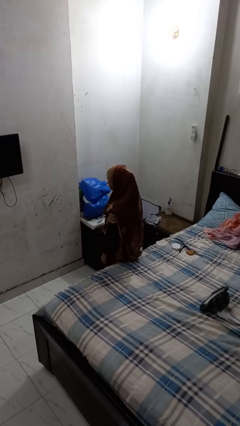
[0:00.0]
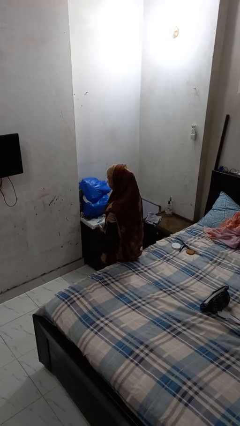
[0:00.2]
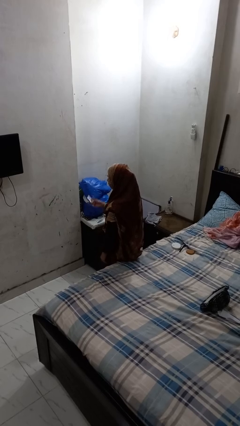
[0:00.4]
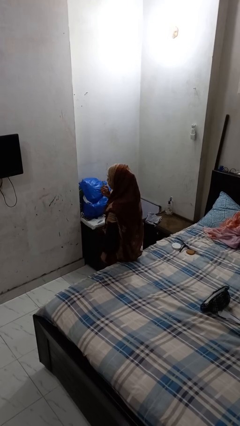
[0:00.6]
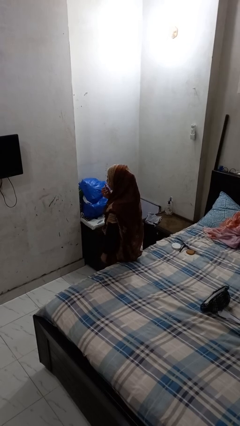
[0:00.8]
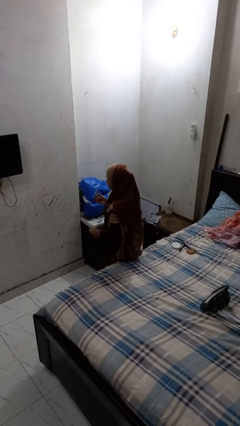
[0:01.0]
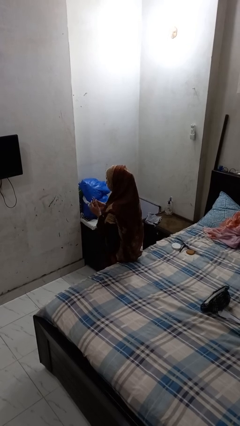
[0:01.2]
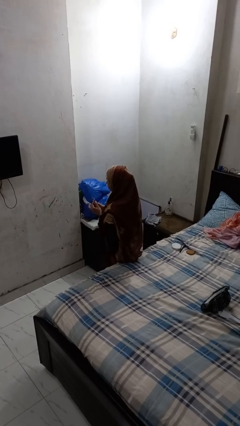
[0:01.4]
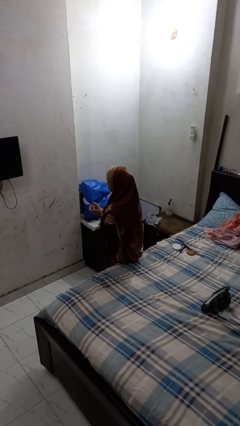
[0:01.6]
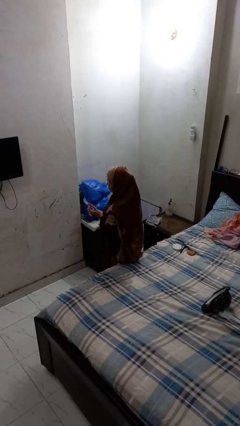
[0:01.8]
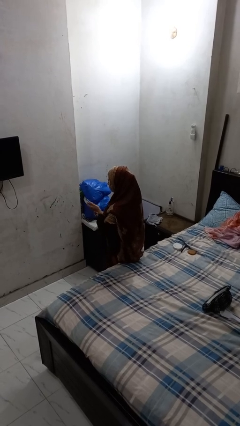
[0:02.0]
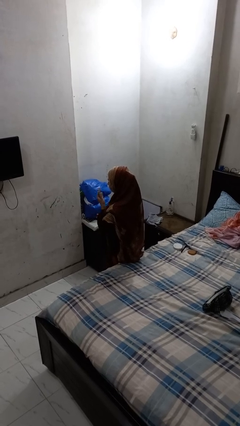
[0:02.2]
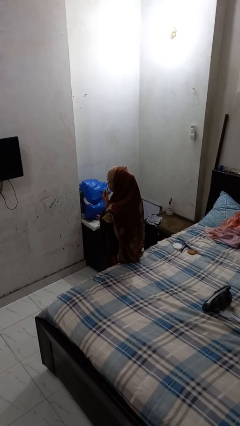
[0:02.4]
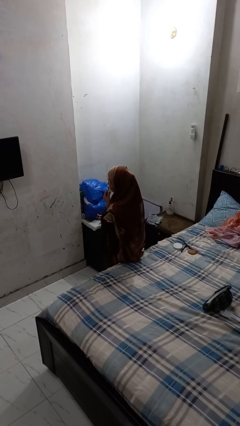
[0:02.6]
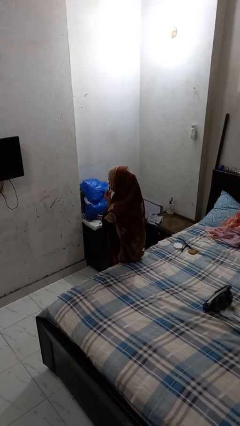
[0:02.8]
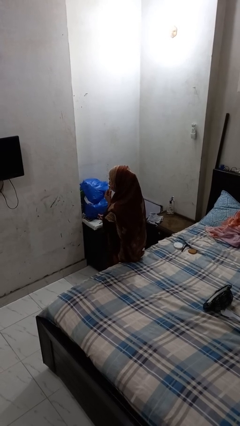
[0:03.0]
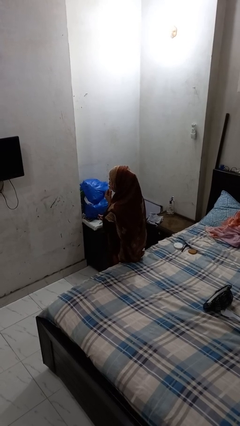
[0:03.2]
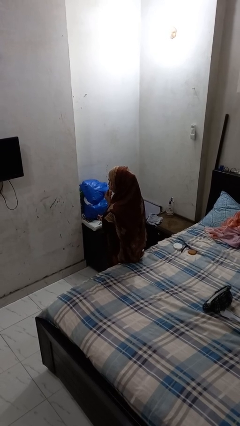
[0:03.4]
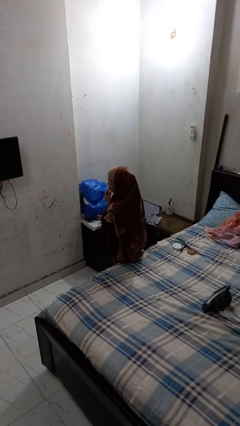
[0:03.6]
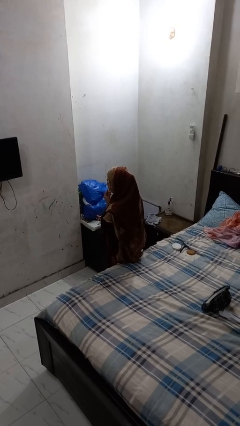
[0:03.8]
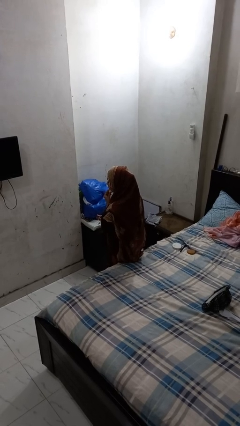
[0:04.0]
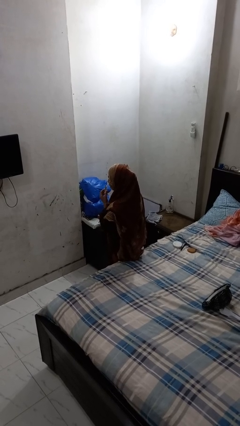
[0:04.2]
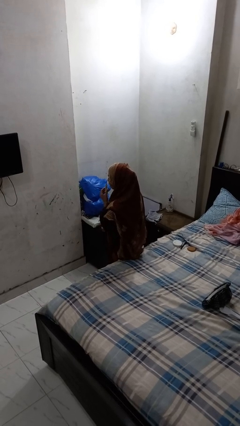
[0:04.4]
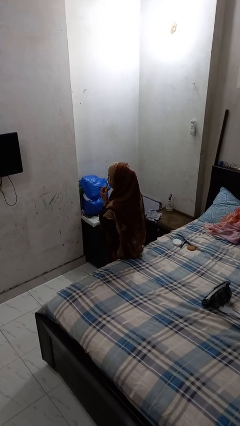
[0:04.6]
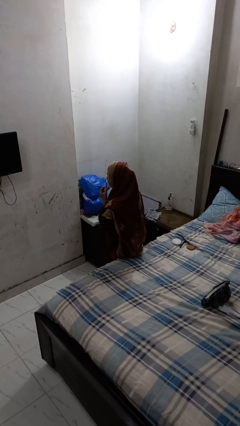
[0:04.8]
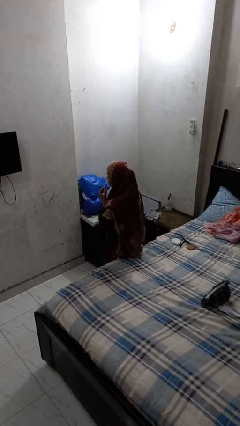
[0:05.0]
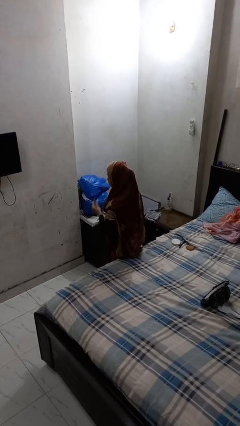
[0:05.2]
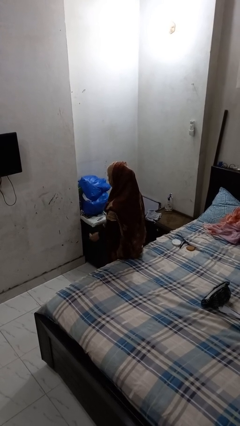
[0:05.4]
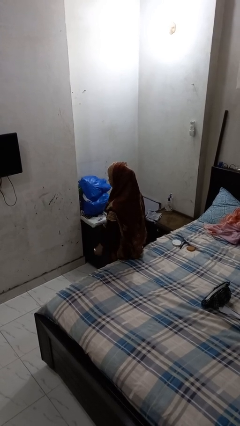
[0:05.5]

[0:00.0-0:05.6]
person applies lip makeup

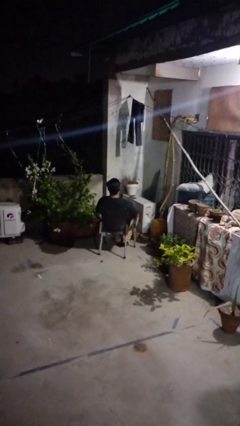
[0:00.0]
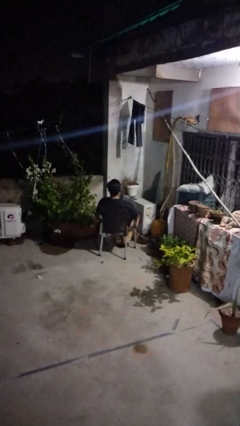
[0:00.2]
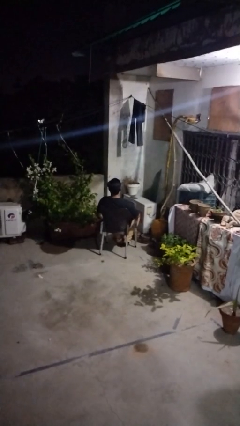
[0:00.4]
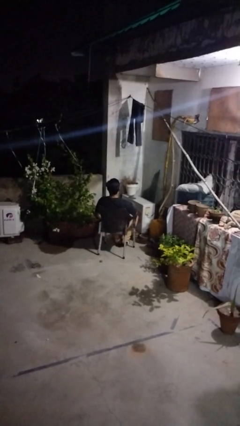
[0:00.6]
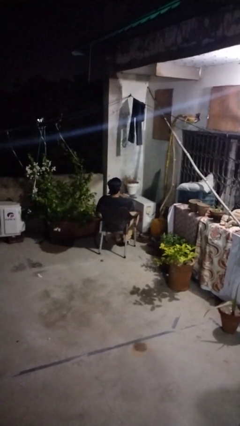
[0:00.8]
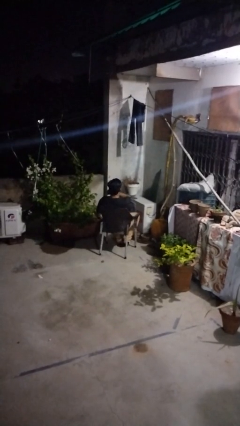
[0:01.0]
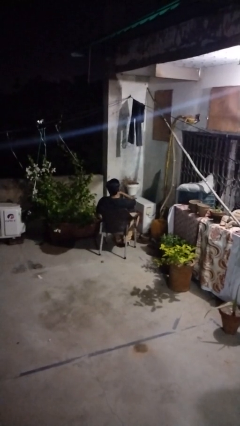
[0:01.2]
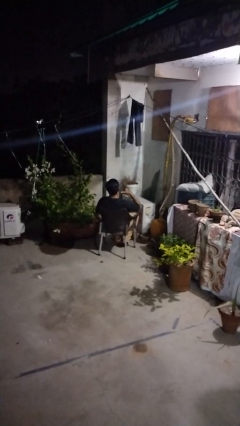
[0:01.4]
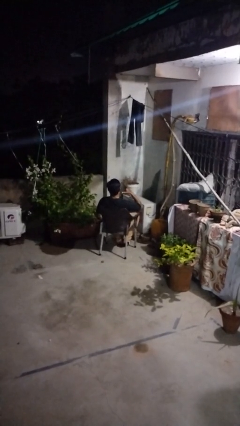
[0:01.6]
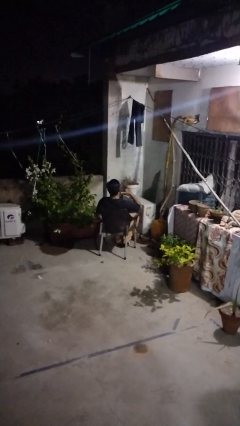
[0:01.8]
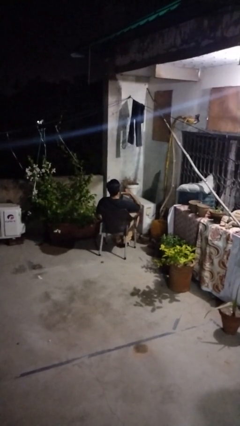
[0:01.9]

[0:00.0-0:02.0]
person gestures cut

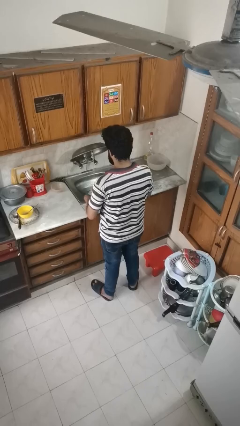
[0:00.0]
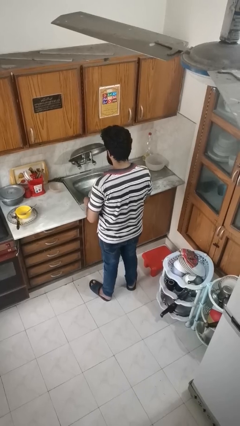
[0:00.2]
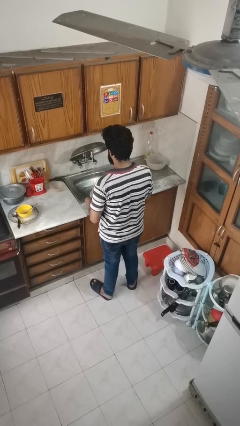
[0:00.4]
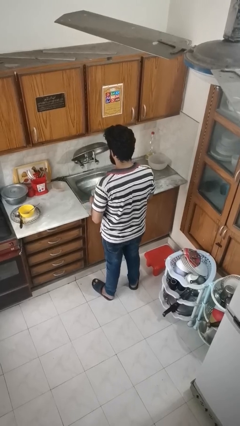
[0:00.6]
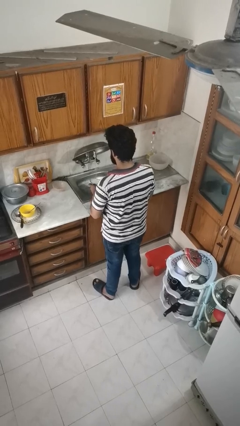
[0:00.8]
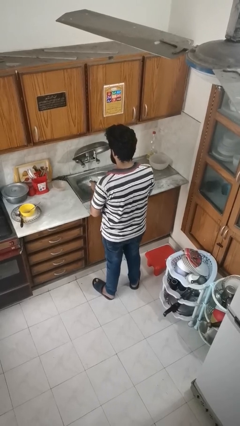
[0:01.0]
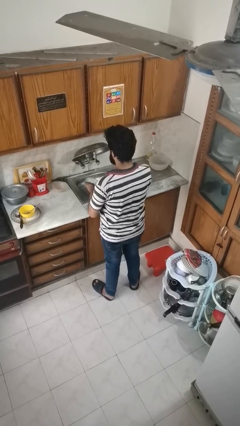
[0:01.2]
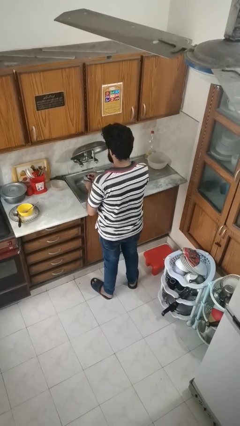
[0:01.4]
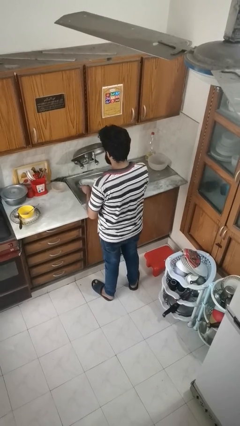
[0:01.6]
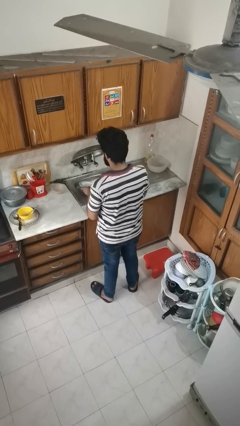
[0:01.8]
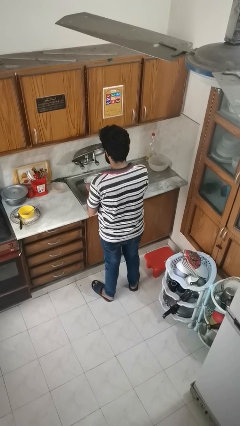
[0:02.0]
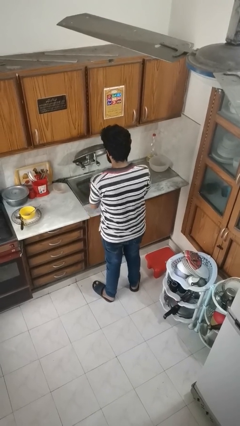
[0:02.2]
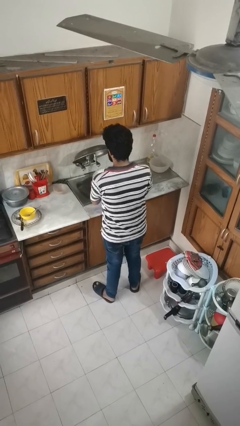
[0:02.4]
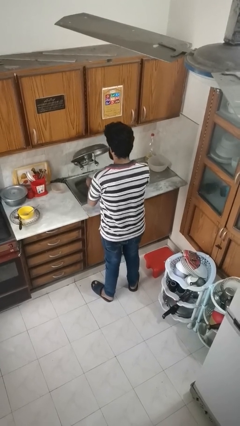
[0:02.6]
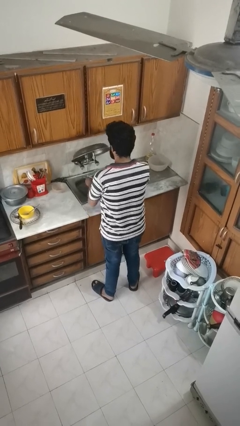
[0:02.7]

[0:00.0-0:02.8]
person washes dish

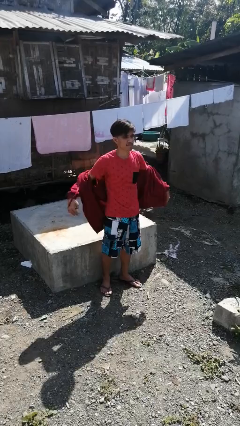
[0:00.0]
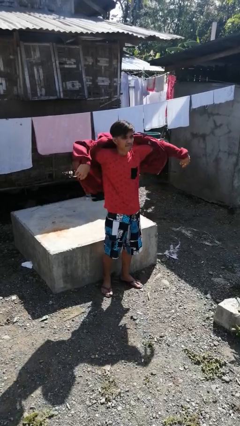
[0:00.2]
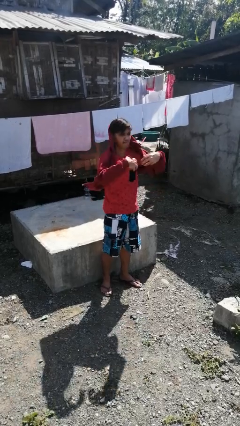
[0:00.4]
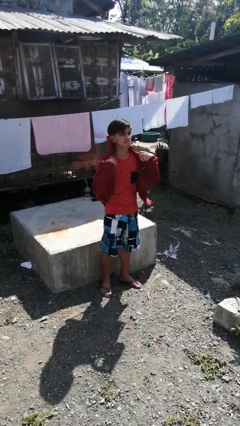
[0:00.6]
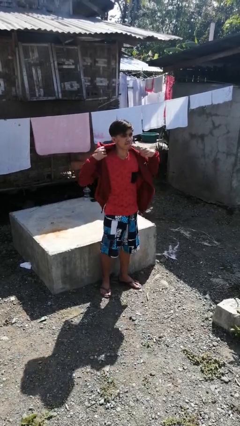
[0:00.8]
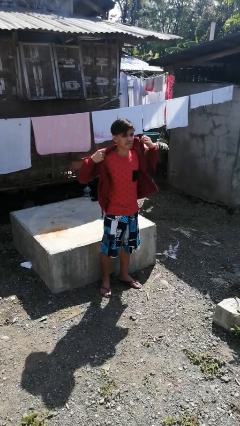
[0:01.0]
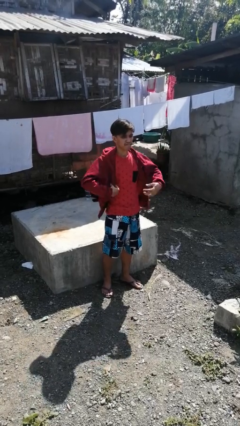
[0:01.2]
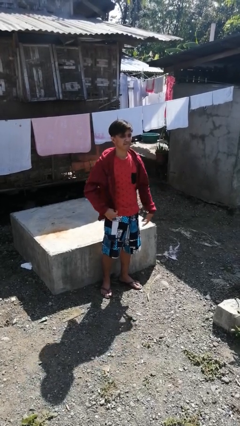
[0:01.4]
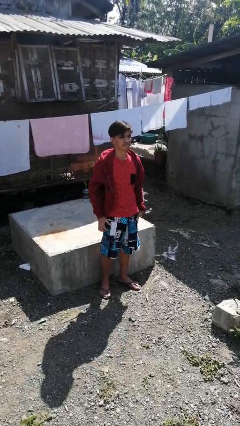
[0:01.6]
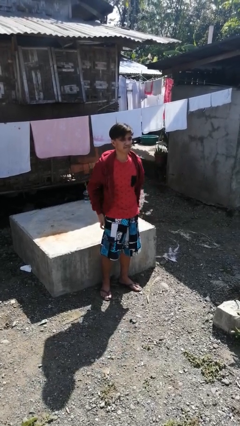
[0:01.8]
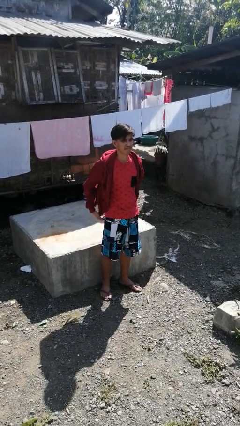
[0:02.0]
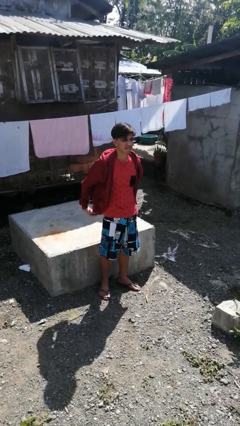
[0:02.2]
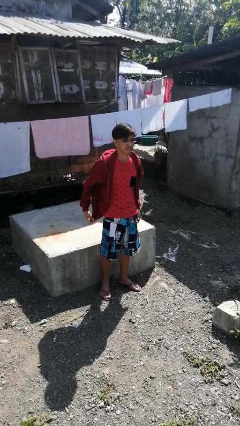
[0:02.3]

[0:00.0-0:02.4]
person puts on jacket

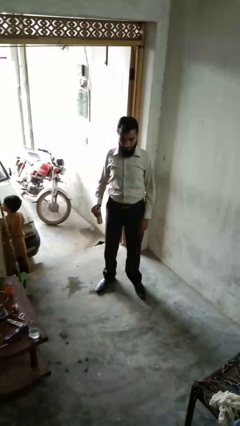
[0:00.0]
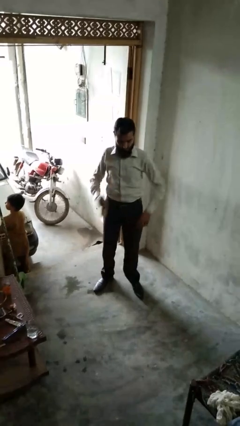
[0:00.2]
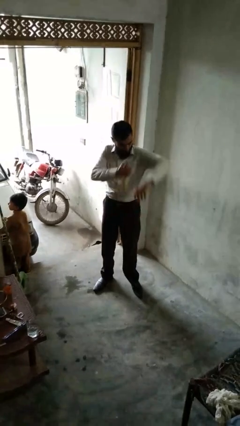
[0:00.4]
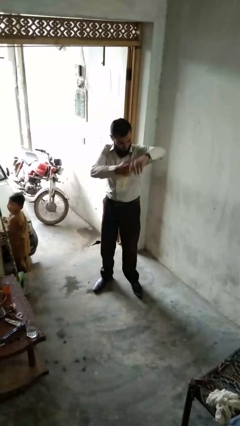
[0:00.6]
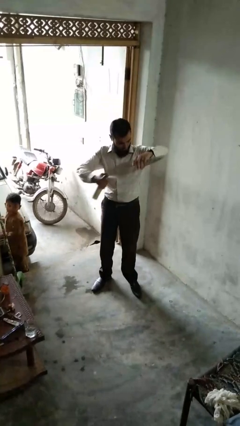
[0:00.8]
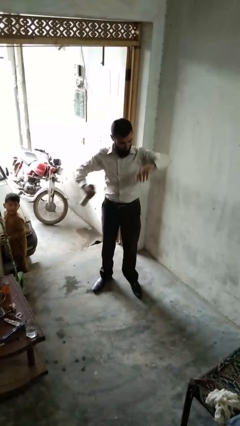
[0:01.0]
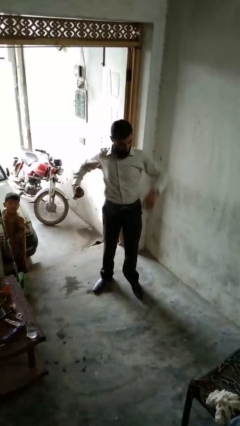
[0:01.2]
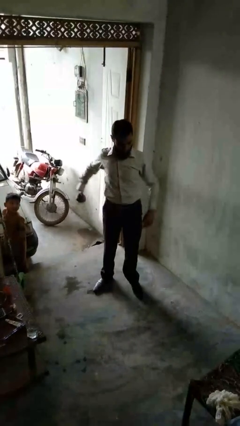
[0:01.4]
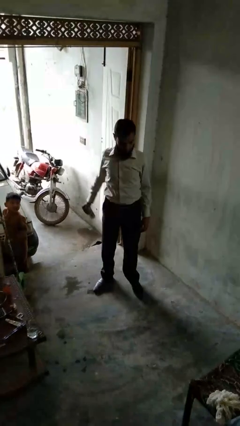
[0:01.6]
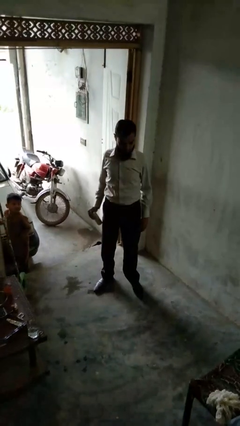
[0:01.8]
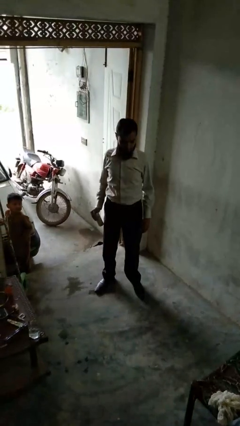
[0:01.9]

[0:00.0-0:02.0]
person applies deodorant

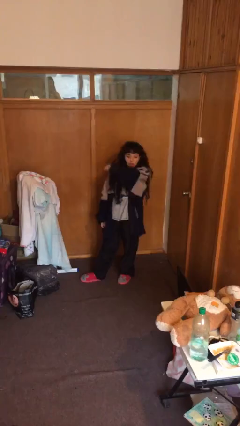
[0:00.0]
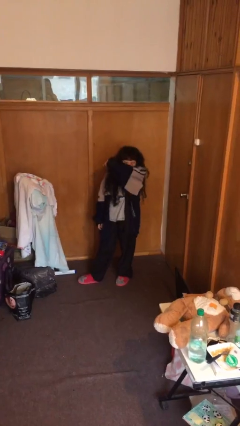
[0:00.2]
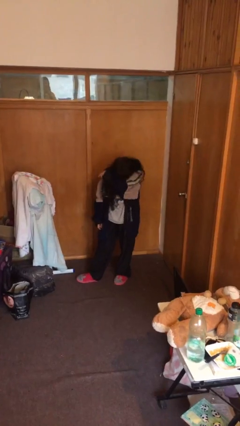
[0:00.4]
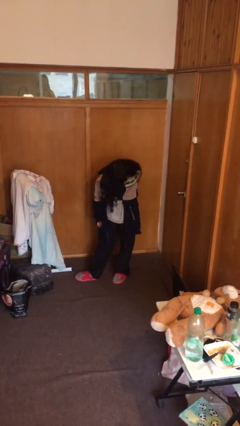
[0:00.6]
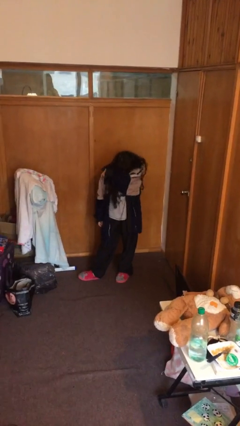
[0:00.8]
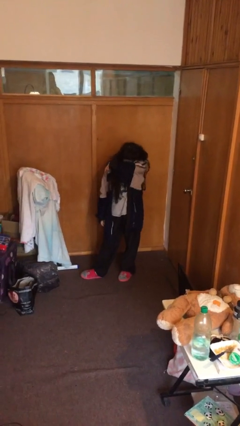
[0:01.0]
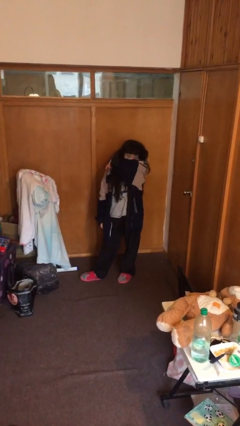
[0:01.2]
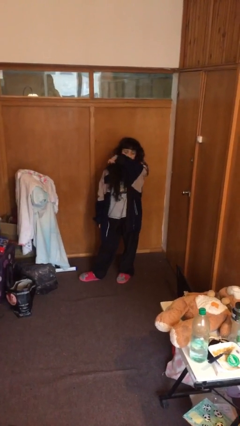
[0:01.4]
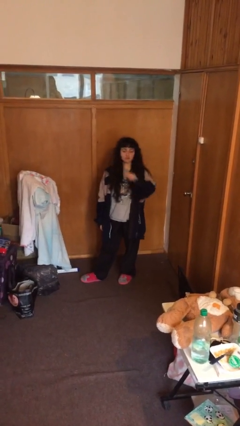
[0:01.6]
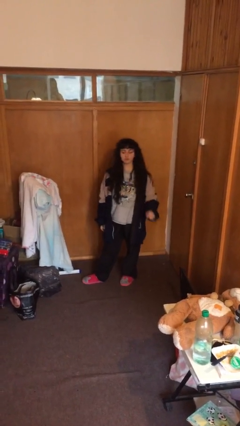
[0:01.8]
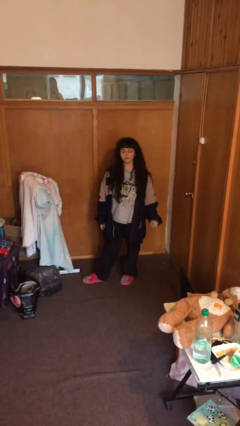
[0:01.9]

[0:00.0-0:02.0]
person sneezes into arm

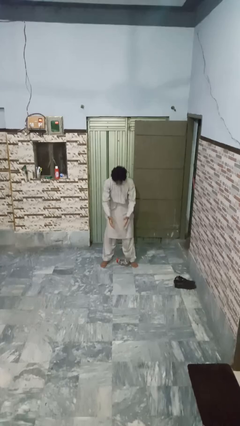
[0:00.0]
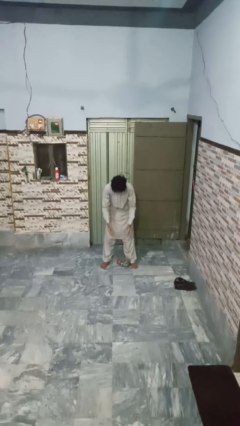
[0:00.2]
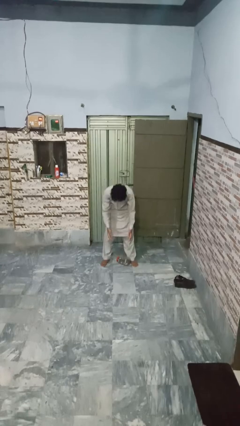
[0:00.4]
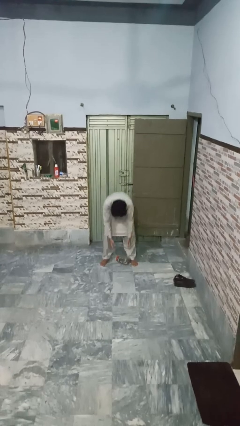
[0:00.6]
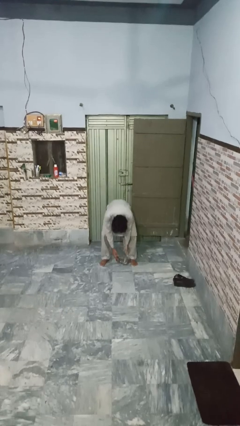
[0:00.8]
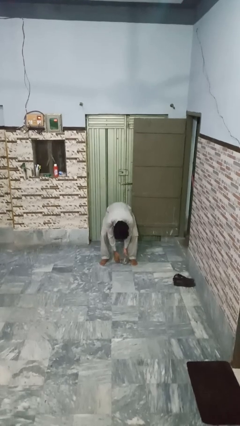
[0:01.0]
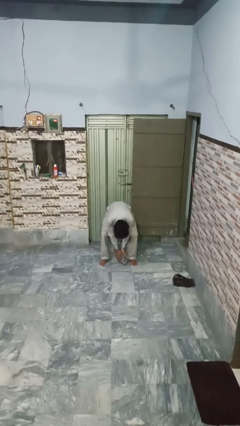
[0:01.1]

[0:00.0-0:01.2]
person catches dropped object
